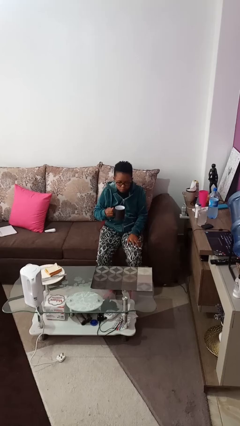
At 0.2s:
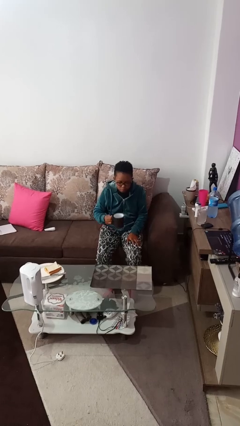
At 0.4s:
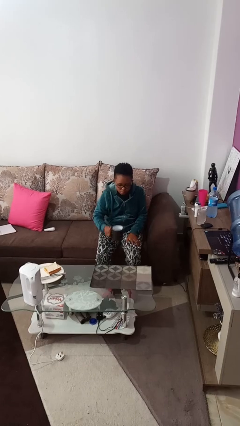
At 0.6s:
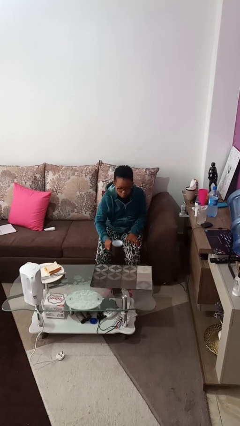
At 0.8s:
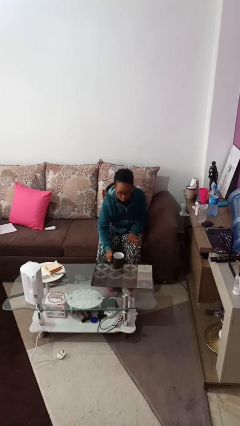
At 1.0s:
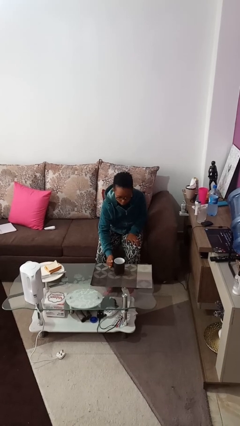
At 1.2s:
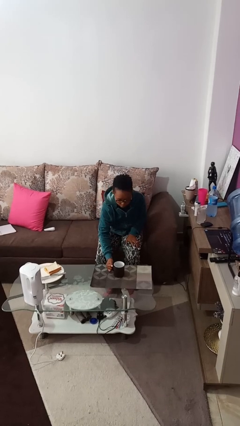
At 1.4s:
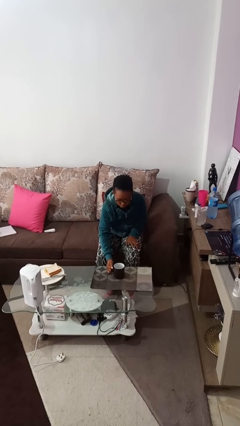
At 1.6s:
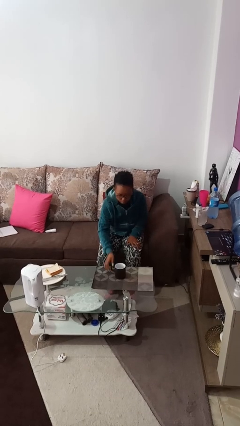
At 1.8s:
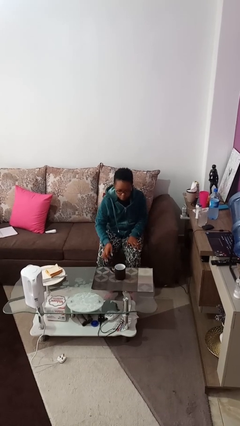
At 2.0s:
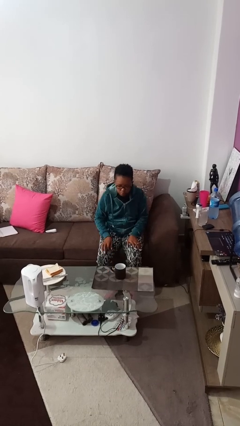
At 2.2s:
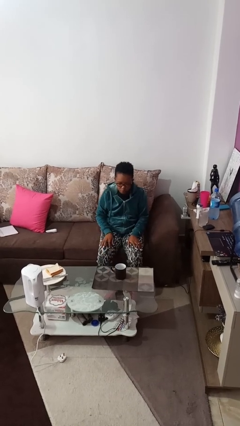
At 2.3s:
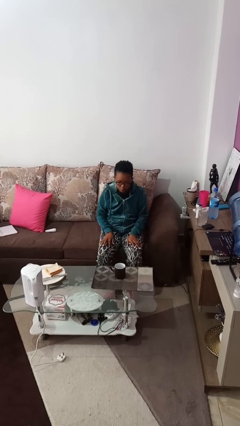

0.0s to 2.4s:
person puts down object on table

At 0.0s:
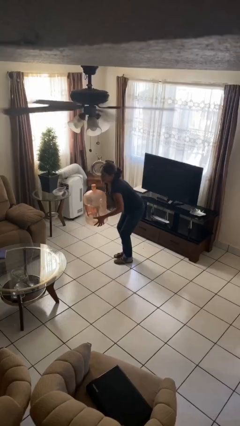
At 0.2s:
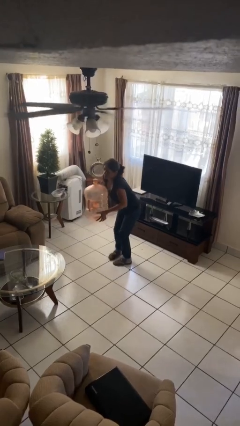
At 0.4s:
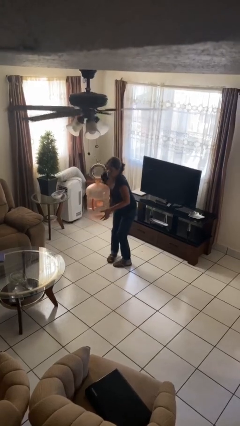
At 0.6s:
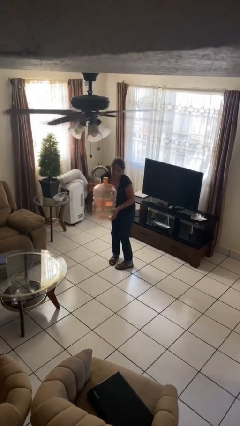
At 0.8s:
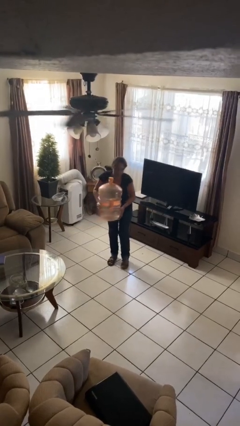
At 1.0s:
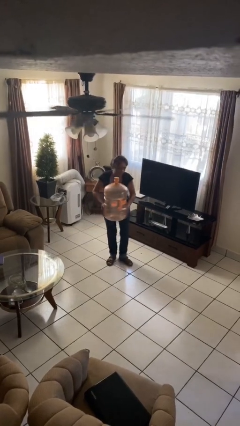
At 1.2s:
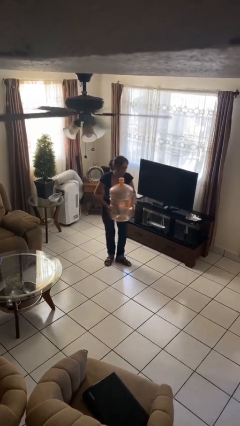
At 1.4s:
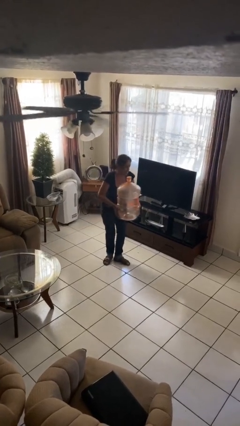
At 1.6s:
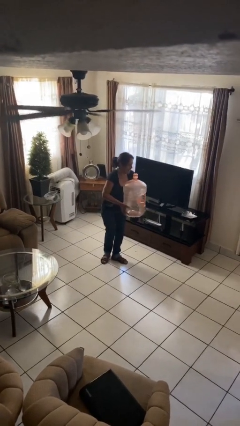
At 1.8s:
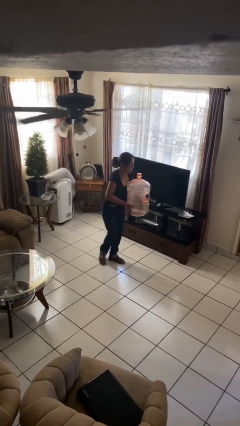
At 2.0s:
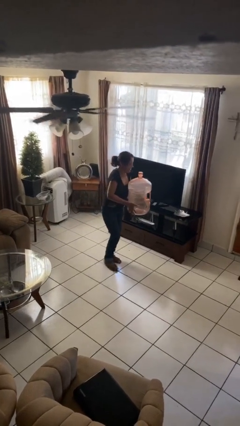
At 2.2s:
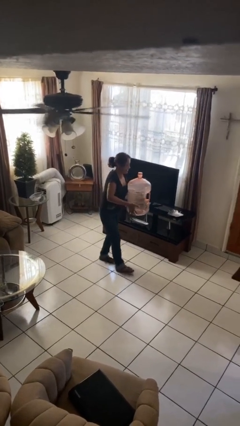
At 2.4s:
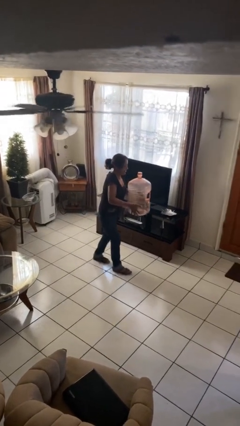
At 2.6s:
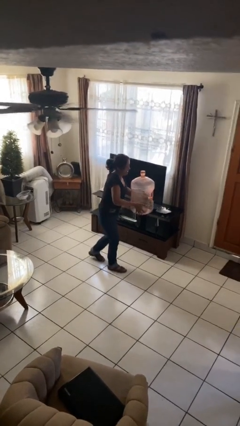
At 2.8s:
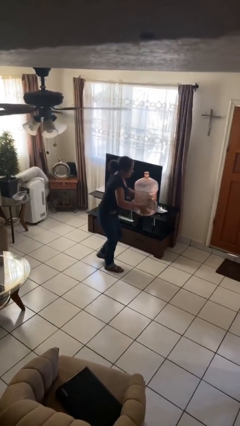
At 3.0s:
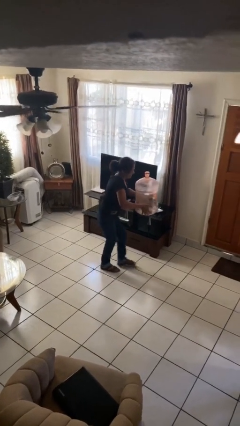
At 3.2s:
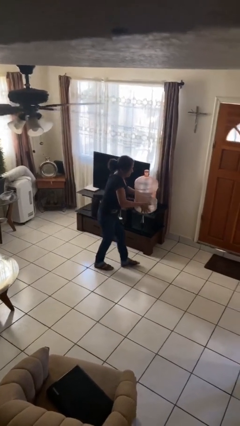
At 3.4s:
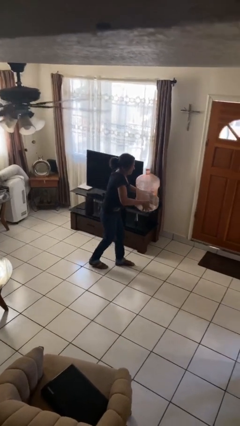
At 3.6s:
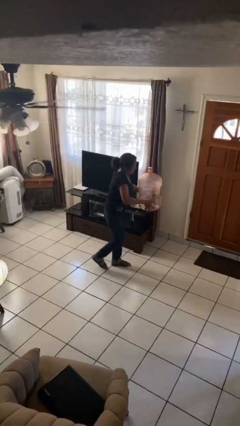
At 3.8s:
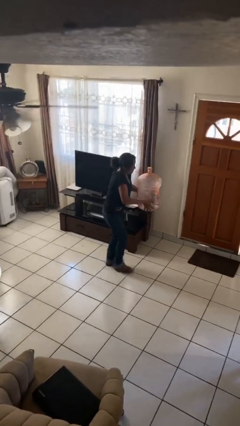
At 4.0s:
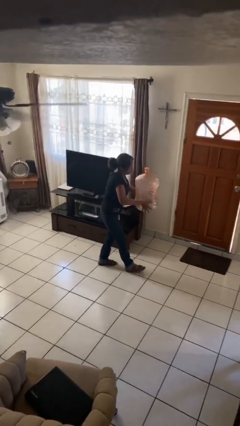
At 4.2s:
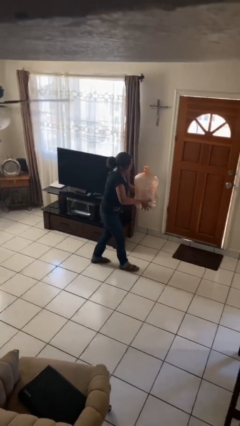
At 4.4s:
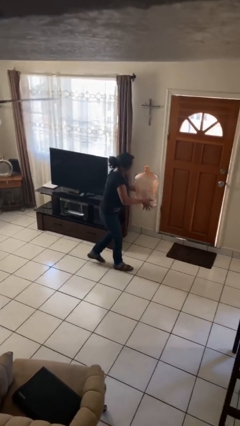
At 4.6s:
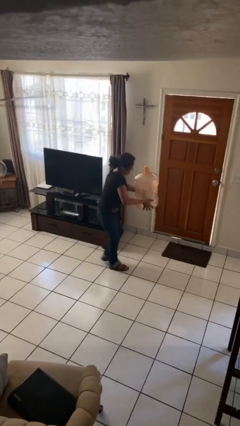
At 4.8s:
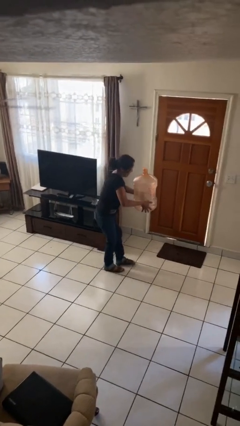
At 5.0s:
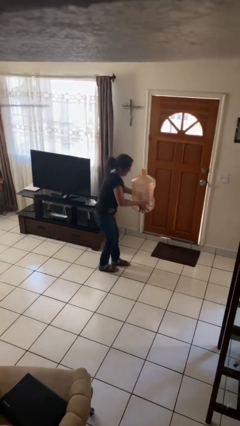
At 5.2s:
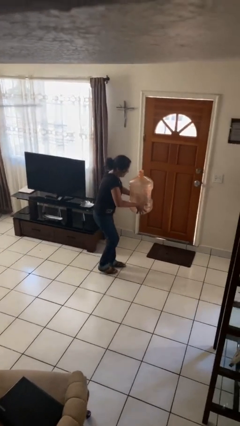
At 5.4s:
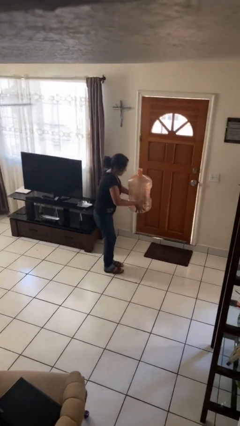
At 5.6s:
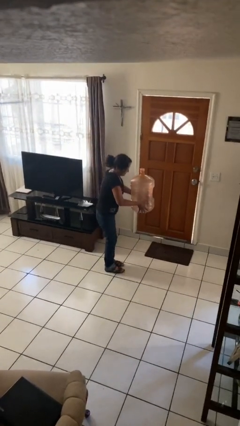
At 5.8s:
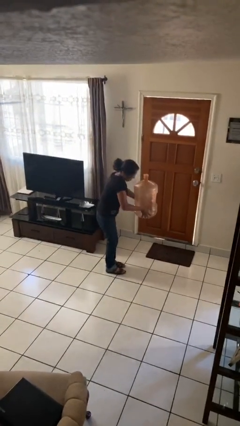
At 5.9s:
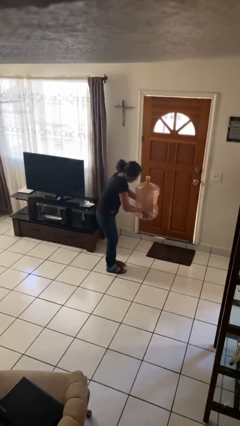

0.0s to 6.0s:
person carries heavy object

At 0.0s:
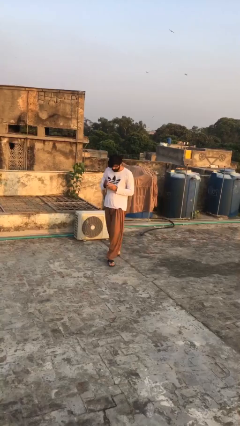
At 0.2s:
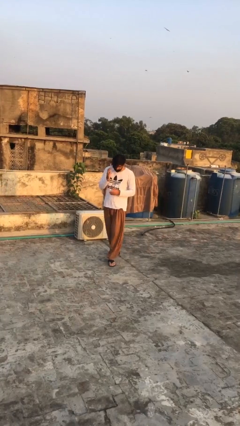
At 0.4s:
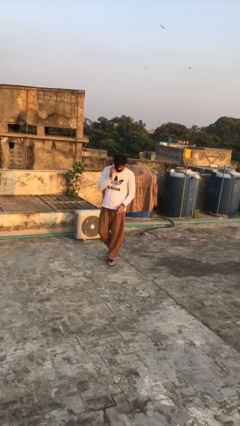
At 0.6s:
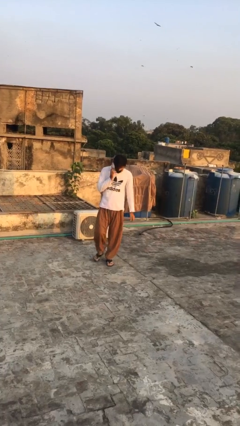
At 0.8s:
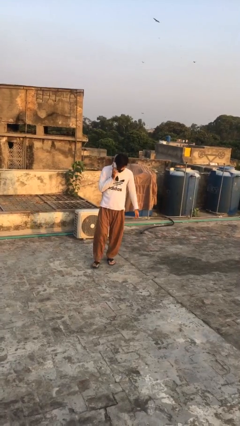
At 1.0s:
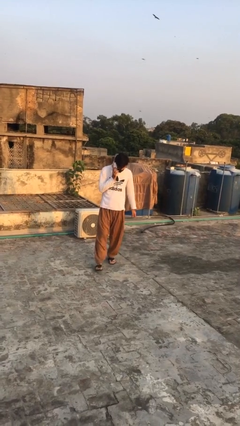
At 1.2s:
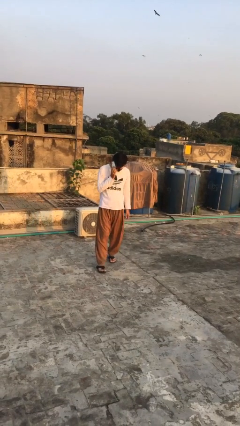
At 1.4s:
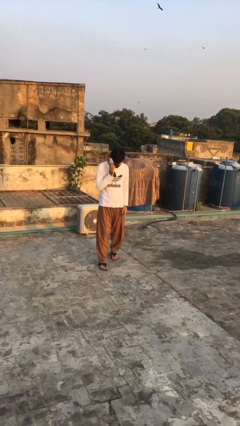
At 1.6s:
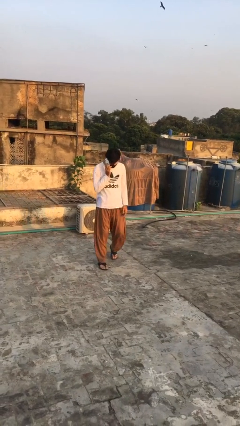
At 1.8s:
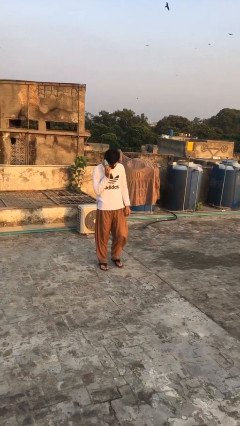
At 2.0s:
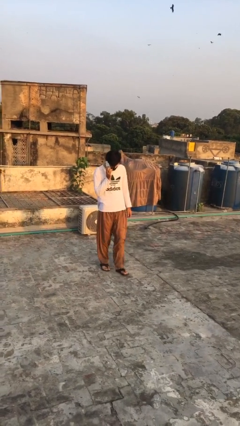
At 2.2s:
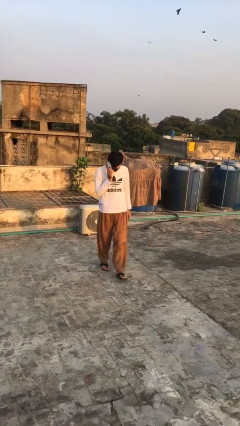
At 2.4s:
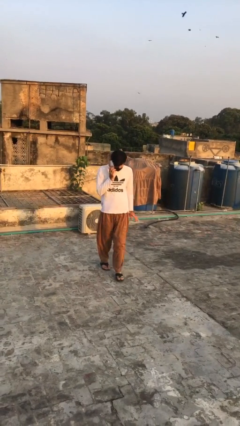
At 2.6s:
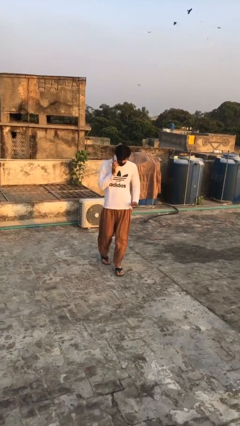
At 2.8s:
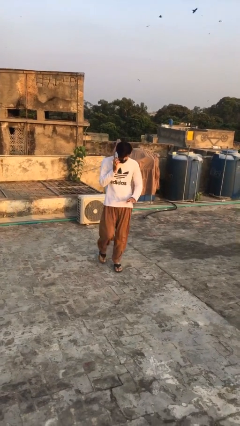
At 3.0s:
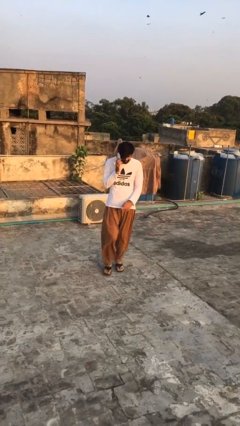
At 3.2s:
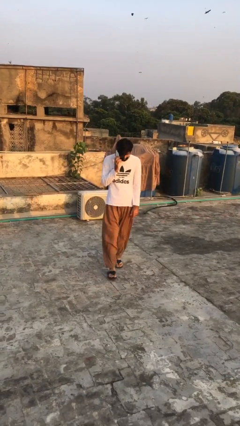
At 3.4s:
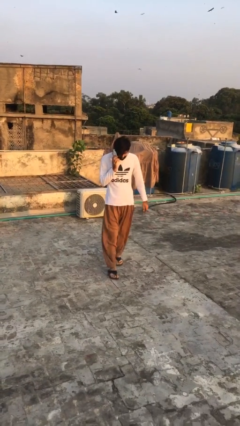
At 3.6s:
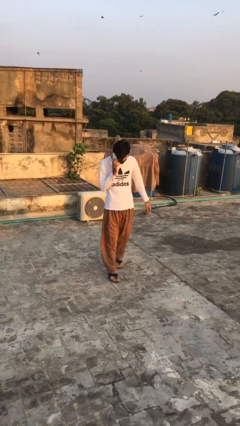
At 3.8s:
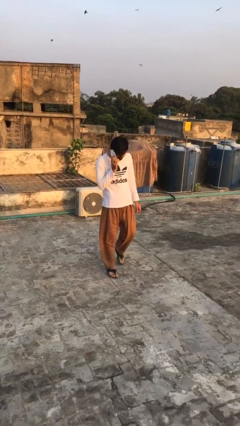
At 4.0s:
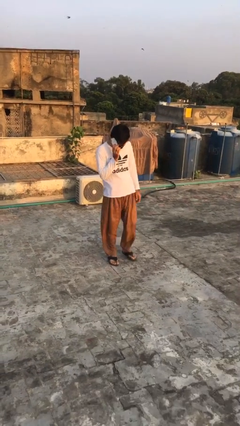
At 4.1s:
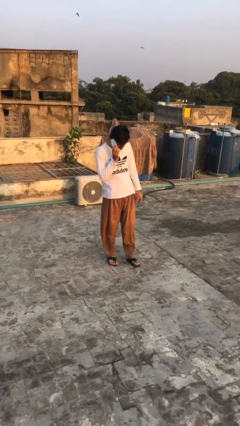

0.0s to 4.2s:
person talks on phone

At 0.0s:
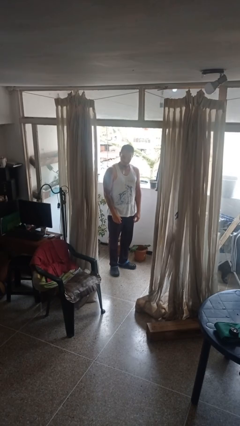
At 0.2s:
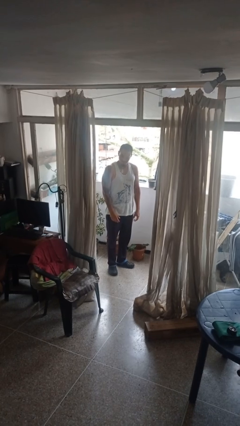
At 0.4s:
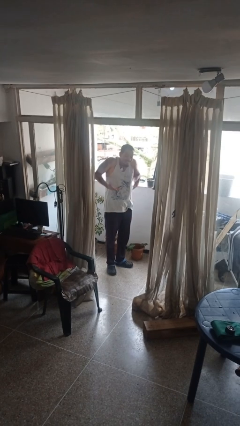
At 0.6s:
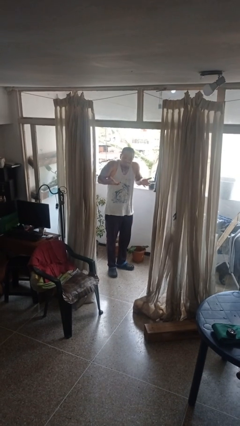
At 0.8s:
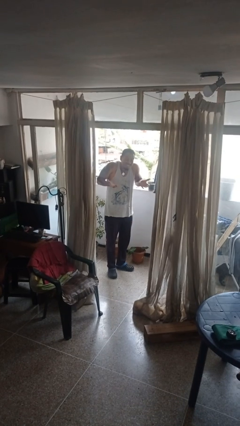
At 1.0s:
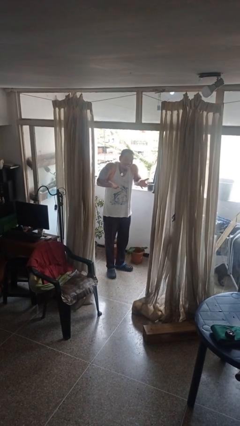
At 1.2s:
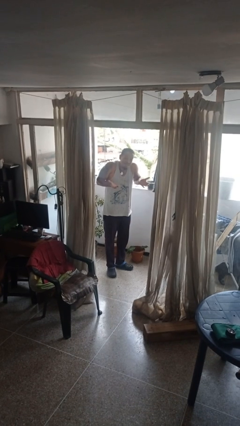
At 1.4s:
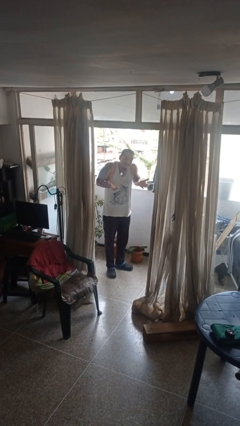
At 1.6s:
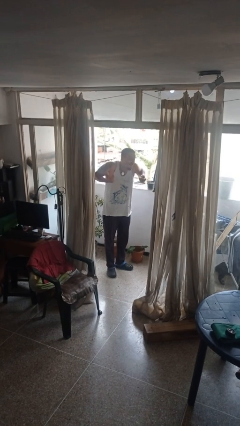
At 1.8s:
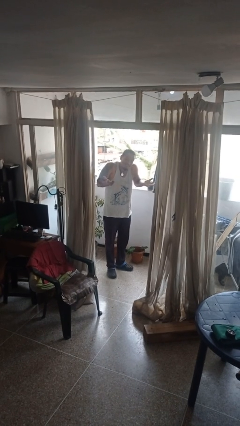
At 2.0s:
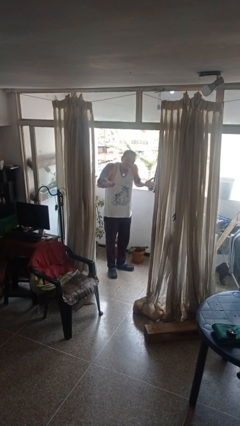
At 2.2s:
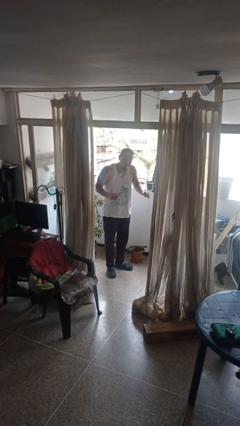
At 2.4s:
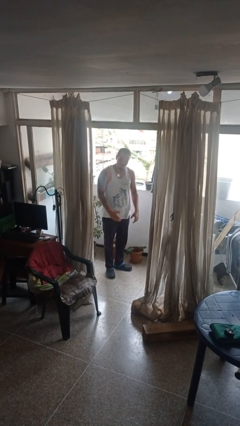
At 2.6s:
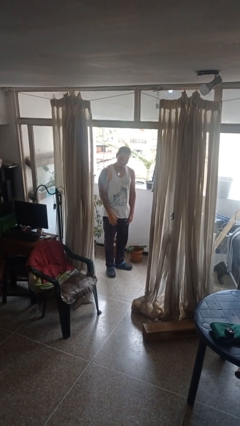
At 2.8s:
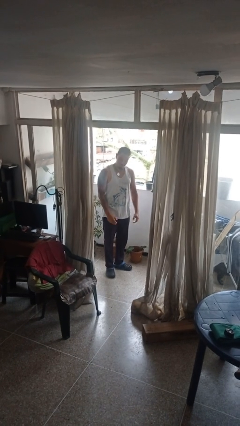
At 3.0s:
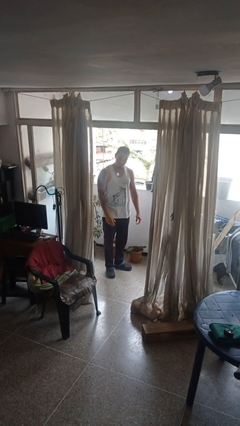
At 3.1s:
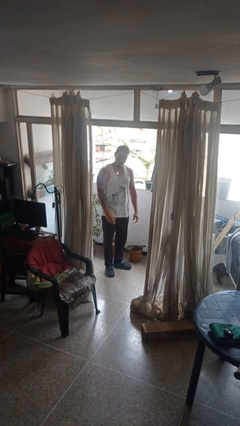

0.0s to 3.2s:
person shrugs

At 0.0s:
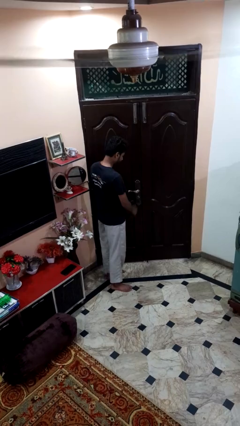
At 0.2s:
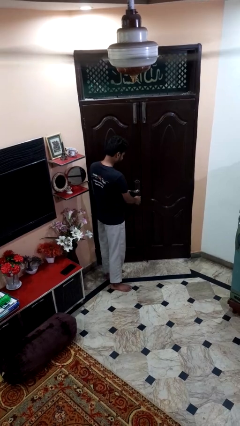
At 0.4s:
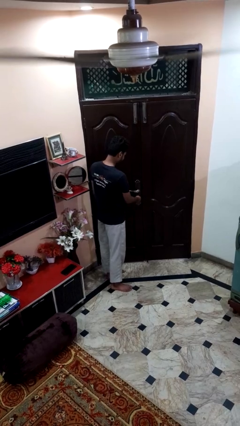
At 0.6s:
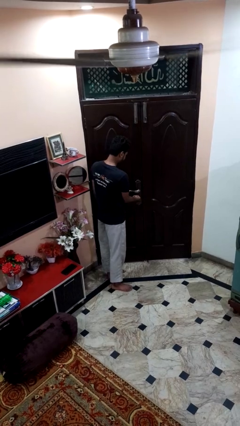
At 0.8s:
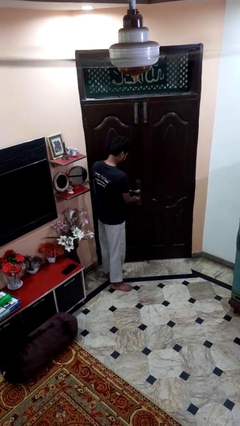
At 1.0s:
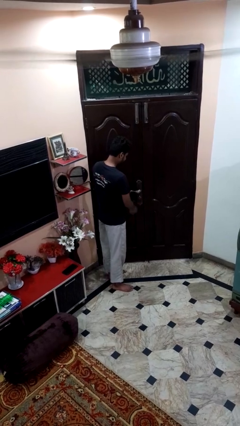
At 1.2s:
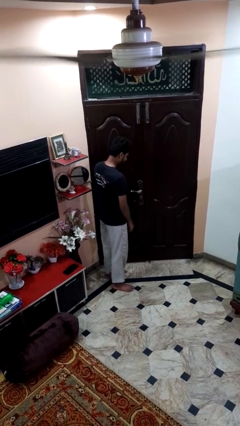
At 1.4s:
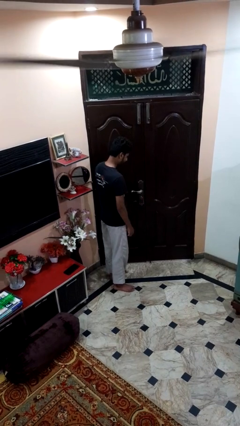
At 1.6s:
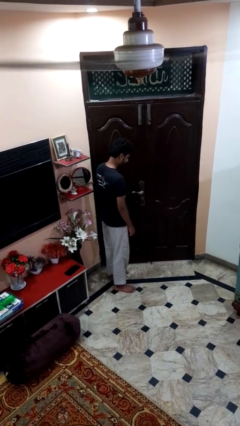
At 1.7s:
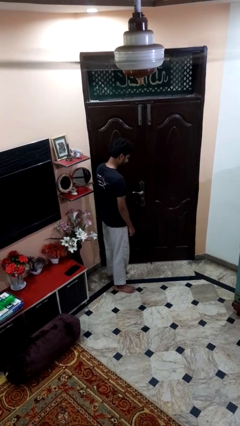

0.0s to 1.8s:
person locks door with keys

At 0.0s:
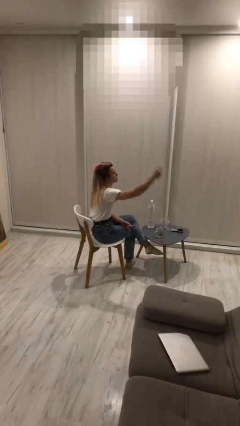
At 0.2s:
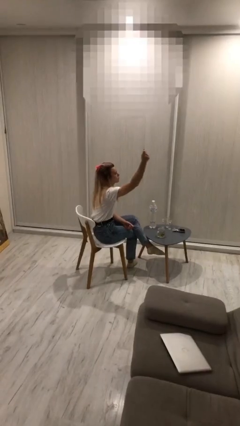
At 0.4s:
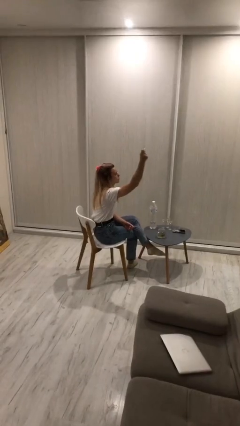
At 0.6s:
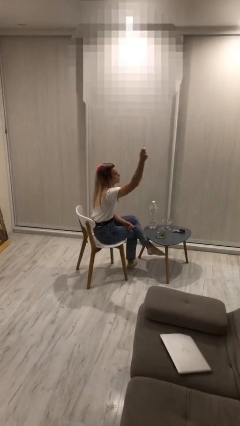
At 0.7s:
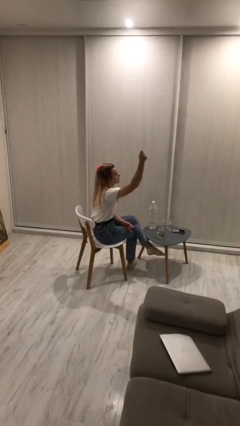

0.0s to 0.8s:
person snaps fingers
